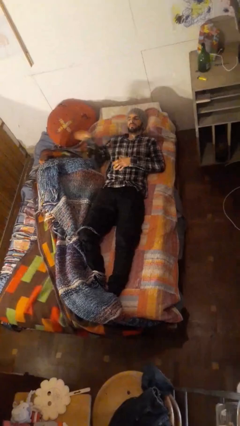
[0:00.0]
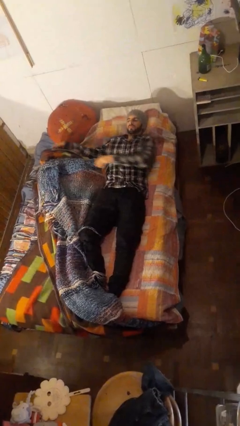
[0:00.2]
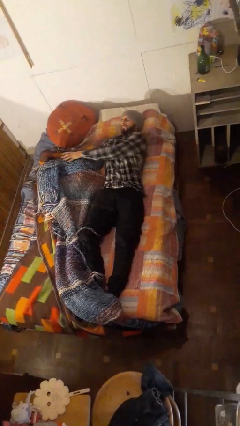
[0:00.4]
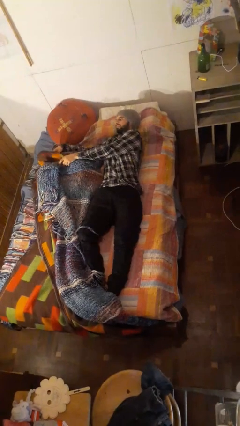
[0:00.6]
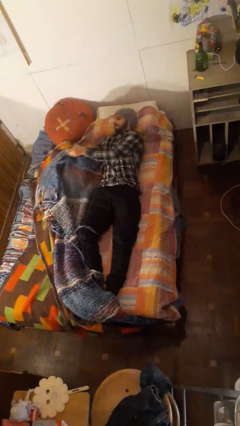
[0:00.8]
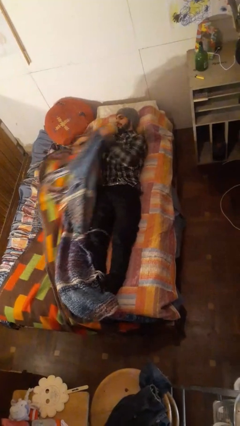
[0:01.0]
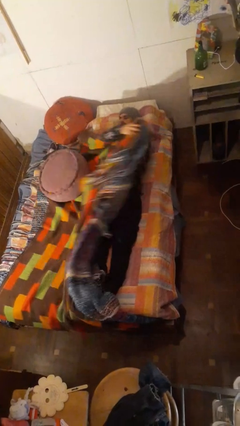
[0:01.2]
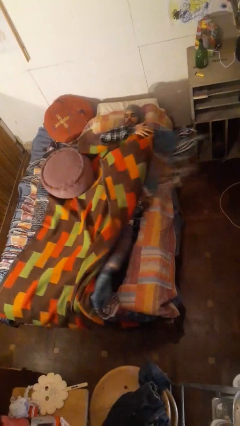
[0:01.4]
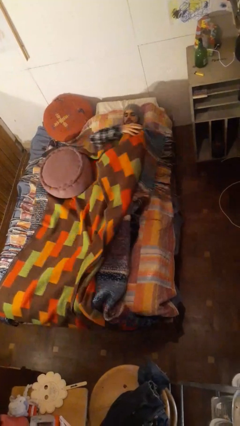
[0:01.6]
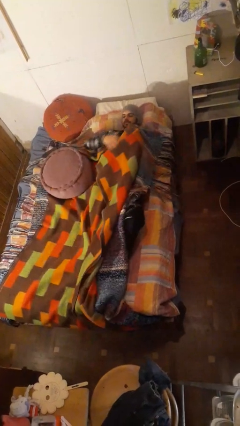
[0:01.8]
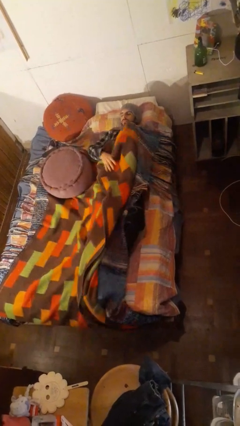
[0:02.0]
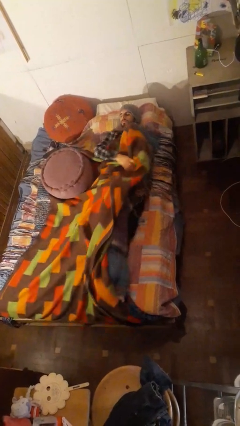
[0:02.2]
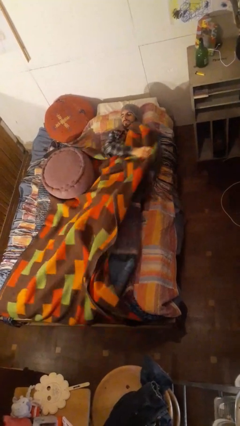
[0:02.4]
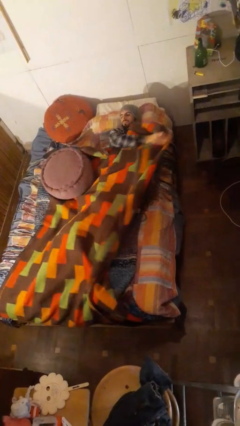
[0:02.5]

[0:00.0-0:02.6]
person covers with bedsheets

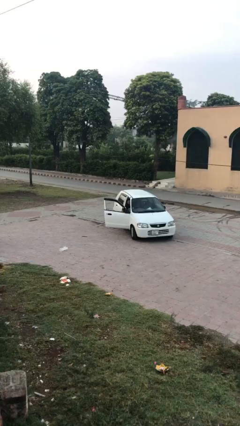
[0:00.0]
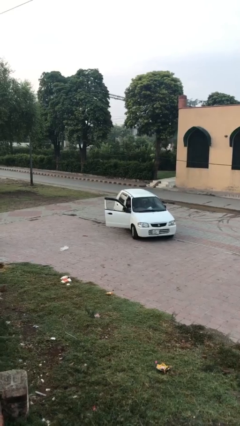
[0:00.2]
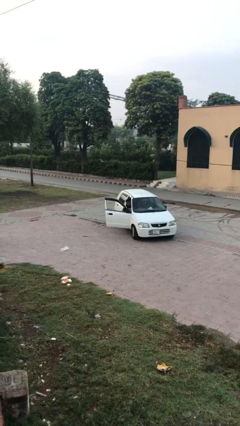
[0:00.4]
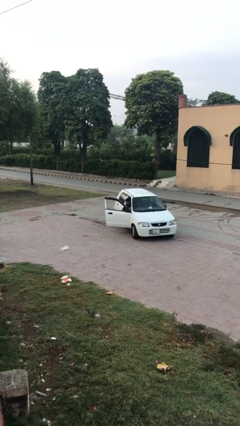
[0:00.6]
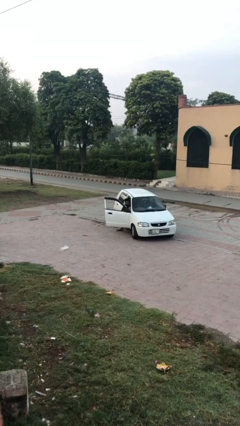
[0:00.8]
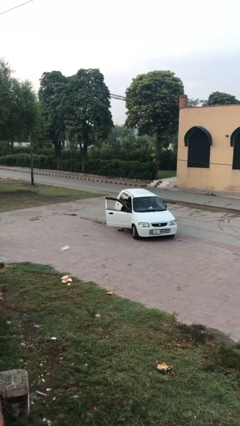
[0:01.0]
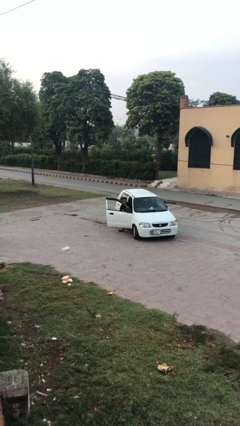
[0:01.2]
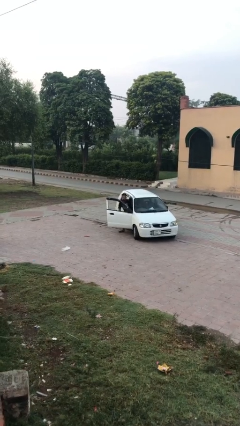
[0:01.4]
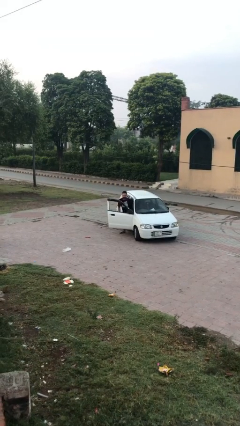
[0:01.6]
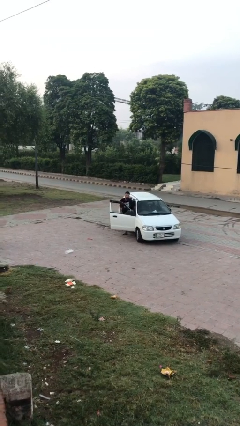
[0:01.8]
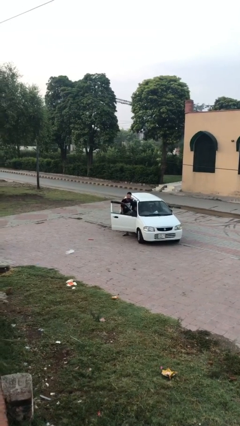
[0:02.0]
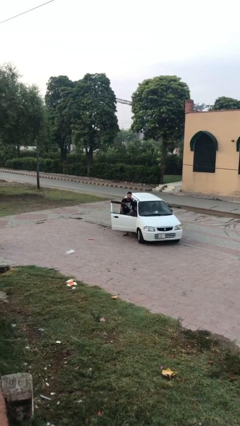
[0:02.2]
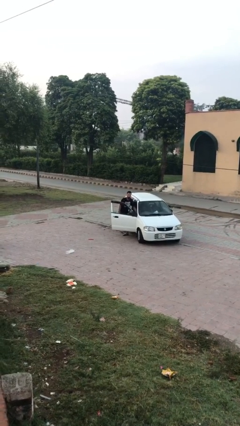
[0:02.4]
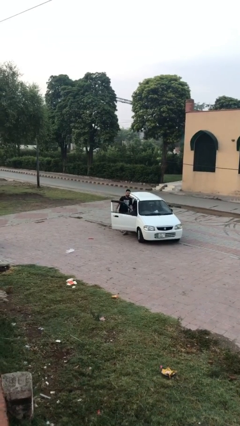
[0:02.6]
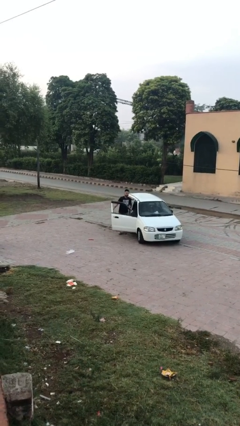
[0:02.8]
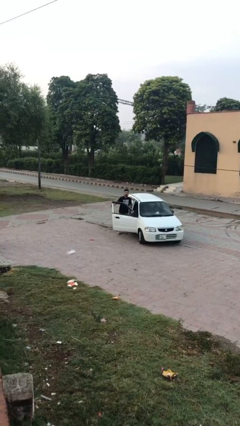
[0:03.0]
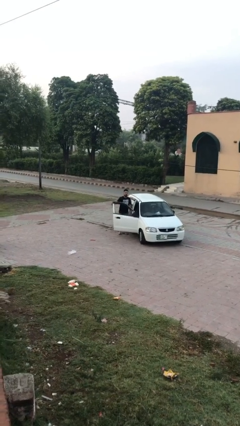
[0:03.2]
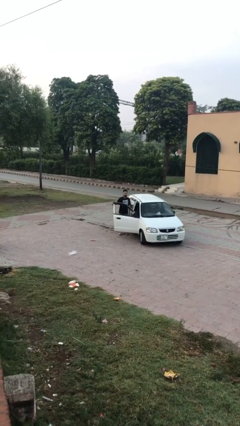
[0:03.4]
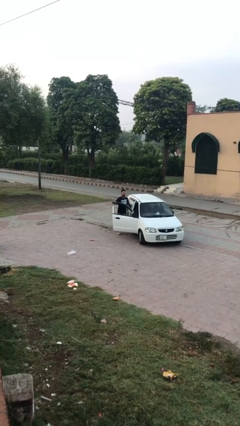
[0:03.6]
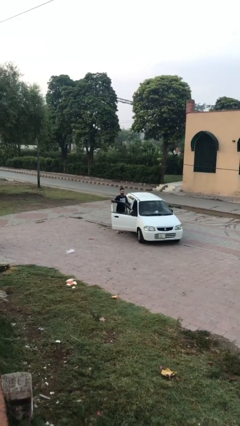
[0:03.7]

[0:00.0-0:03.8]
person exits car

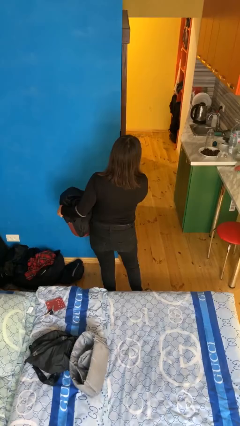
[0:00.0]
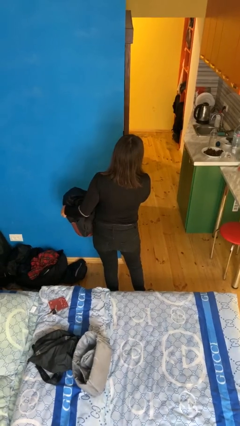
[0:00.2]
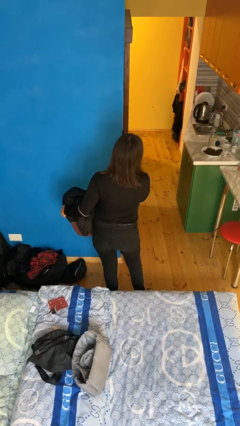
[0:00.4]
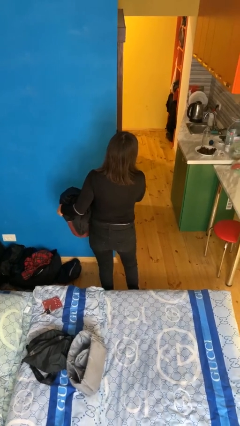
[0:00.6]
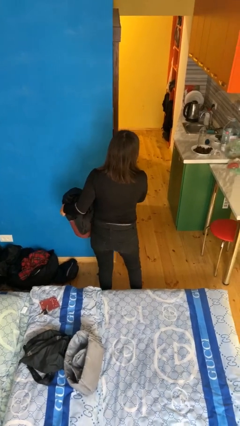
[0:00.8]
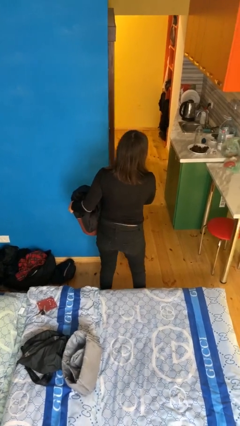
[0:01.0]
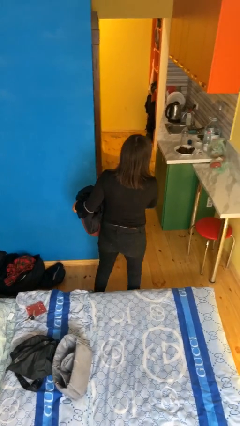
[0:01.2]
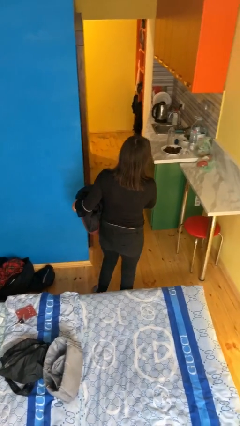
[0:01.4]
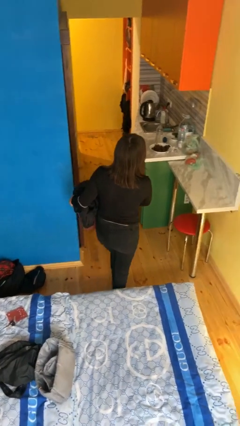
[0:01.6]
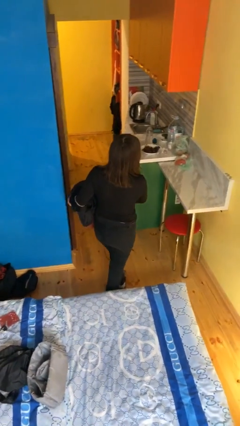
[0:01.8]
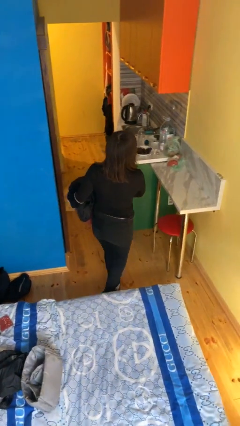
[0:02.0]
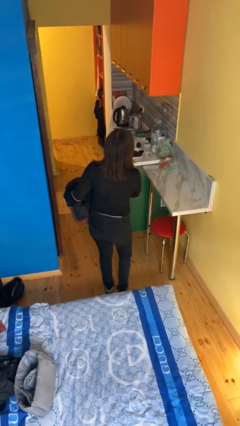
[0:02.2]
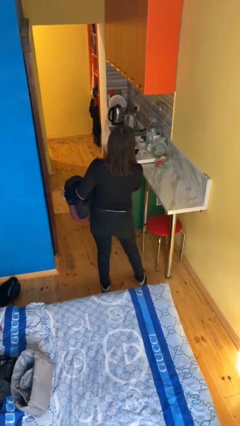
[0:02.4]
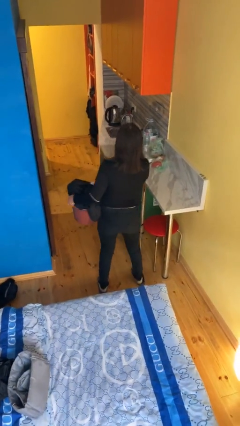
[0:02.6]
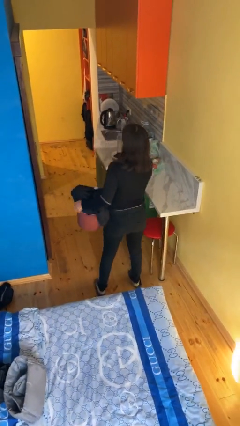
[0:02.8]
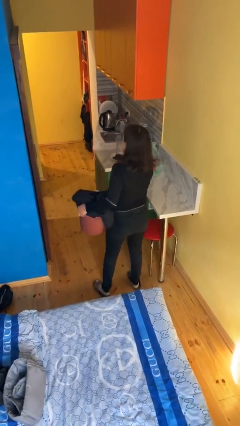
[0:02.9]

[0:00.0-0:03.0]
person carries laundry basket

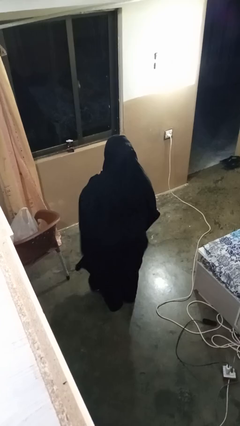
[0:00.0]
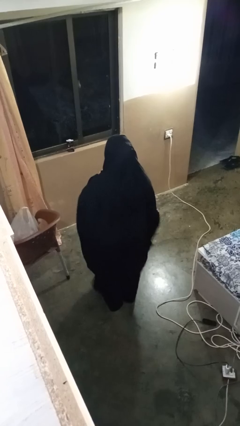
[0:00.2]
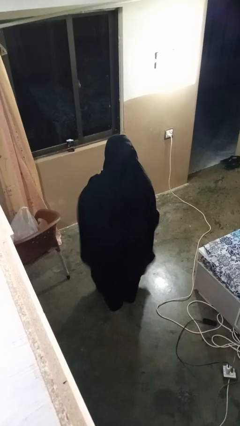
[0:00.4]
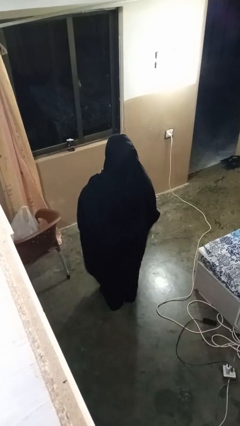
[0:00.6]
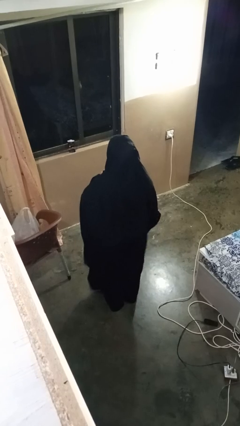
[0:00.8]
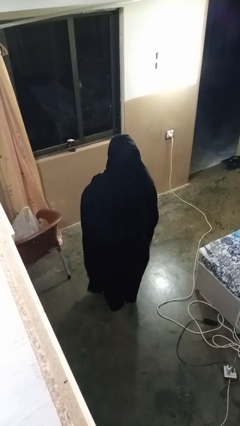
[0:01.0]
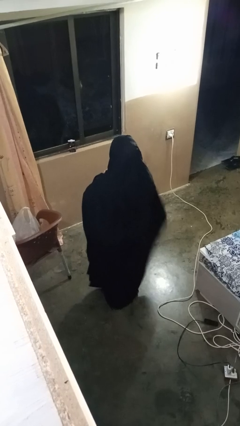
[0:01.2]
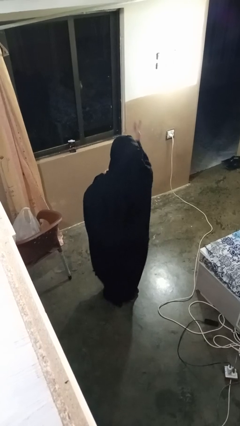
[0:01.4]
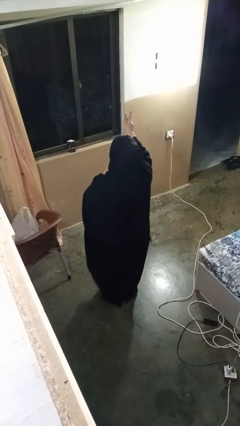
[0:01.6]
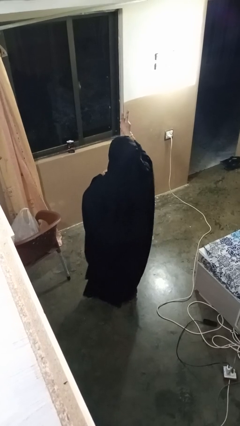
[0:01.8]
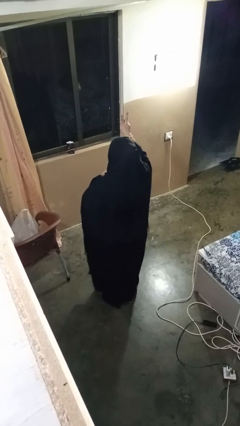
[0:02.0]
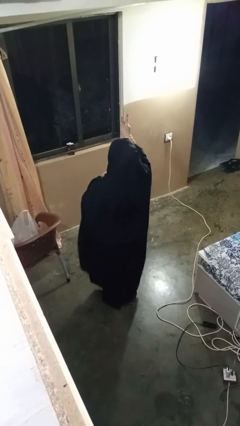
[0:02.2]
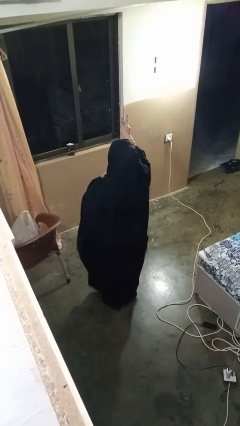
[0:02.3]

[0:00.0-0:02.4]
person gestures peace

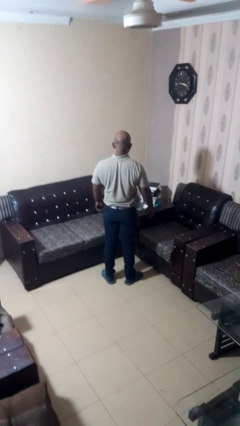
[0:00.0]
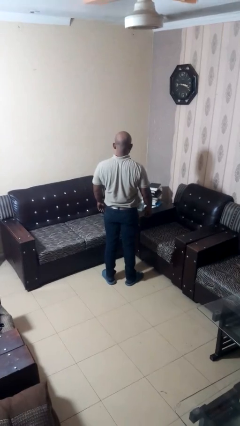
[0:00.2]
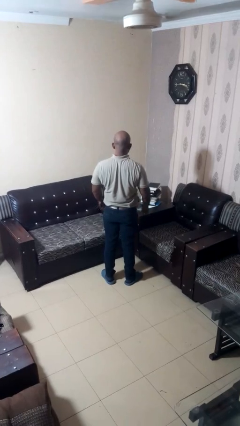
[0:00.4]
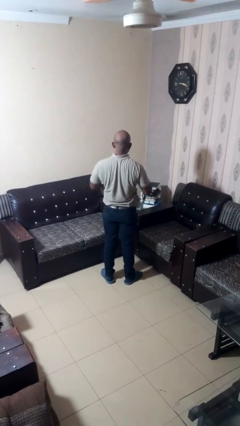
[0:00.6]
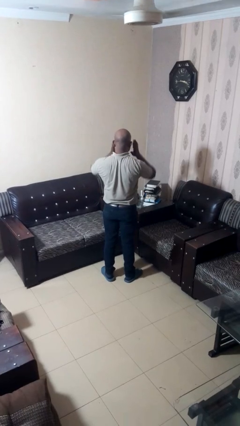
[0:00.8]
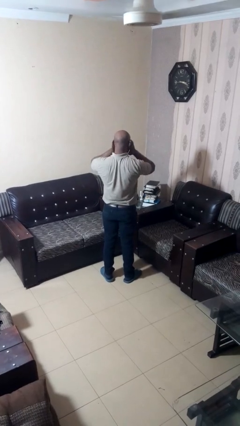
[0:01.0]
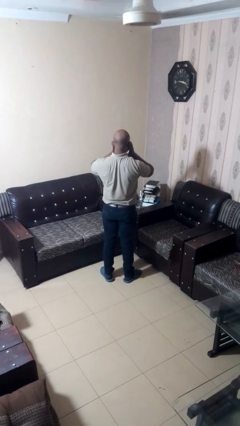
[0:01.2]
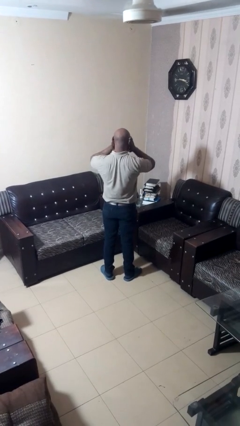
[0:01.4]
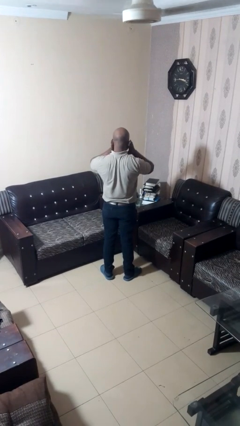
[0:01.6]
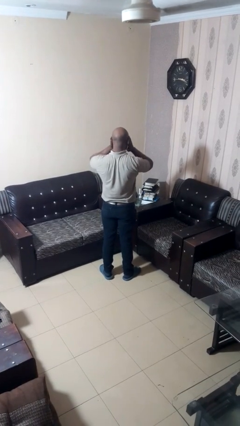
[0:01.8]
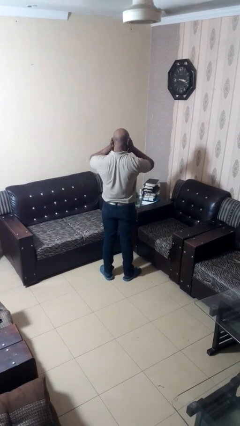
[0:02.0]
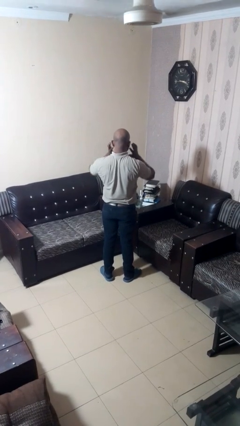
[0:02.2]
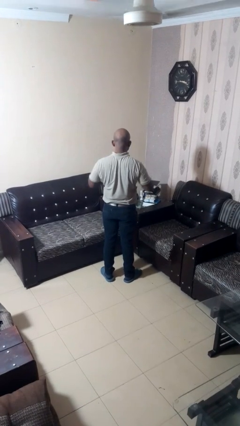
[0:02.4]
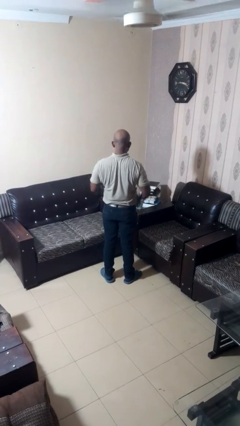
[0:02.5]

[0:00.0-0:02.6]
person touches earlobe

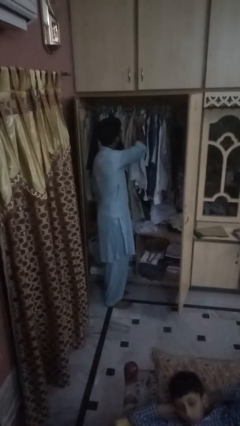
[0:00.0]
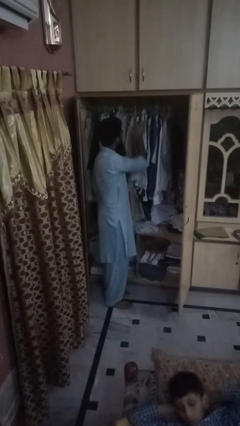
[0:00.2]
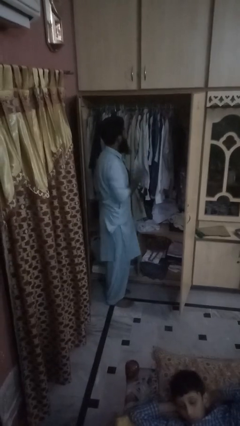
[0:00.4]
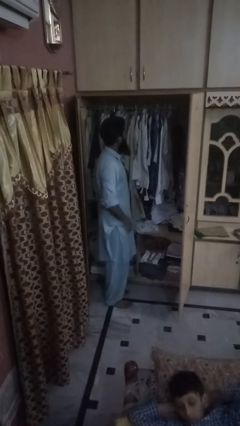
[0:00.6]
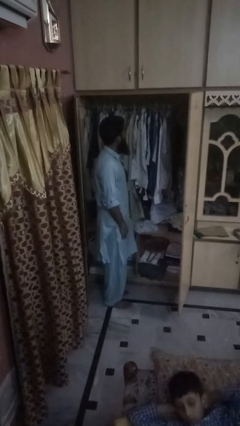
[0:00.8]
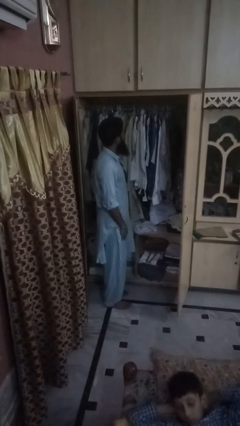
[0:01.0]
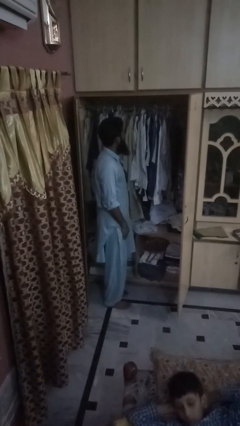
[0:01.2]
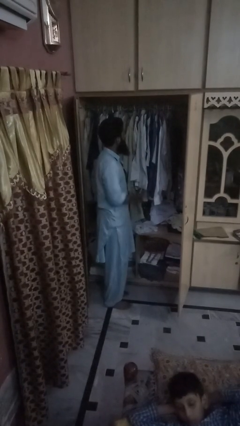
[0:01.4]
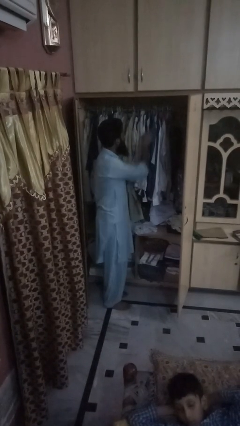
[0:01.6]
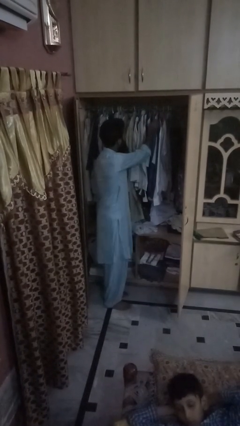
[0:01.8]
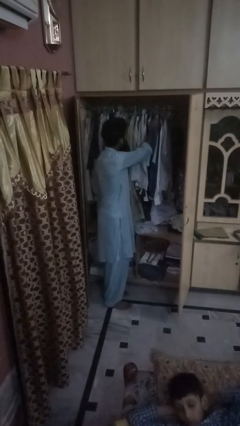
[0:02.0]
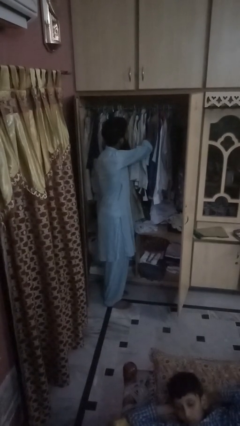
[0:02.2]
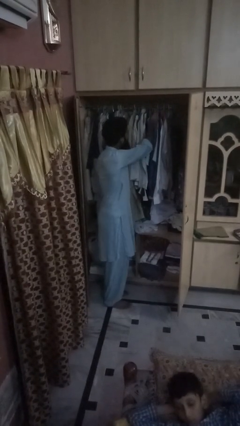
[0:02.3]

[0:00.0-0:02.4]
person puts clothes into closet

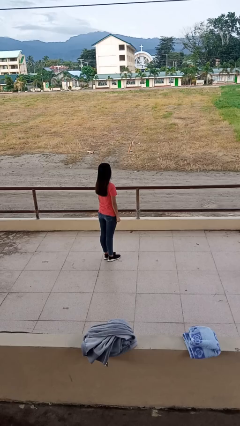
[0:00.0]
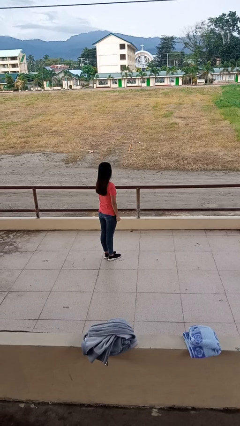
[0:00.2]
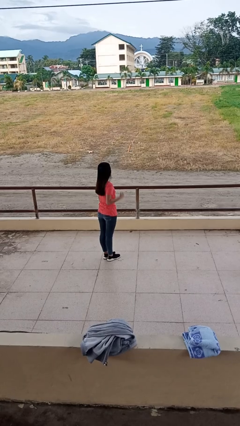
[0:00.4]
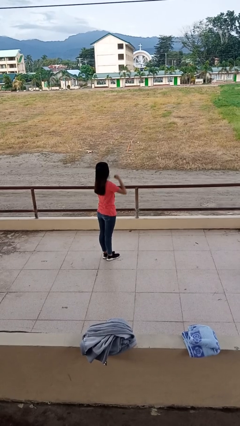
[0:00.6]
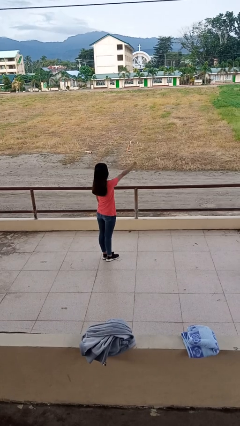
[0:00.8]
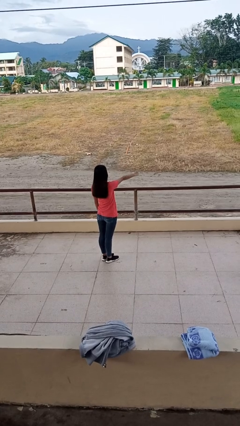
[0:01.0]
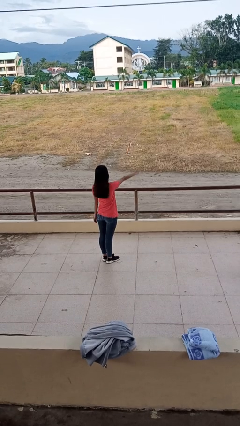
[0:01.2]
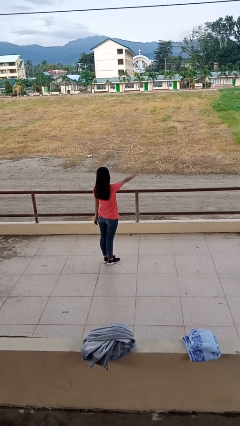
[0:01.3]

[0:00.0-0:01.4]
person punches
